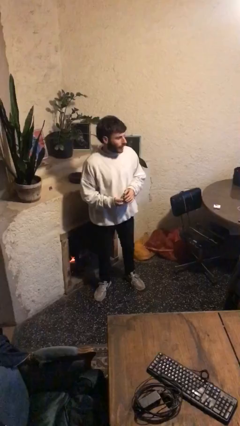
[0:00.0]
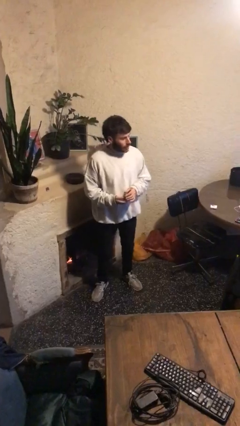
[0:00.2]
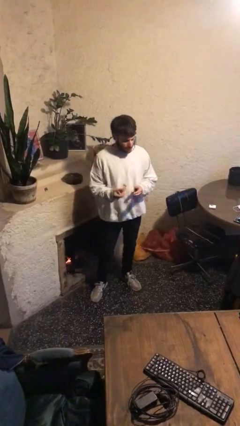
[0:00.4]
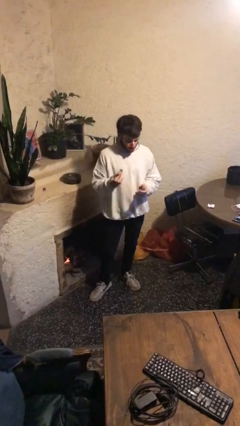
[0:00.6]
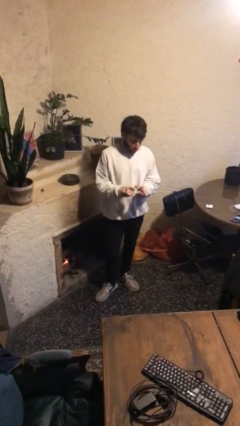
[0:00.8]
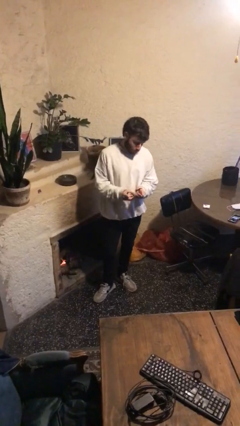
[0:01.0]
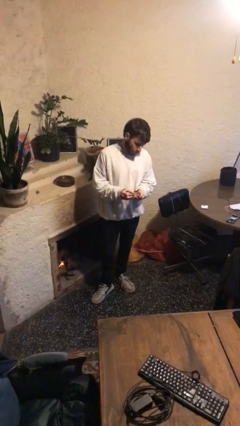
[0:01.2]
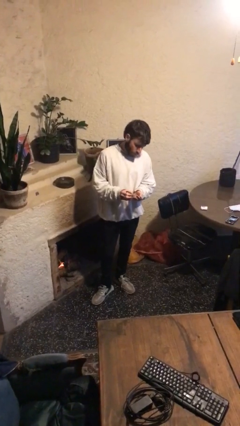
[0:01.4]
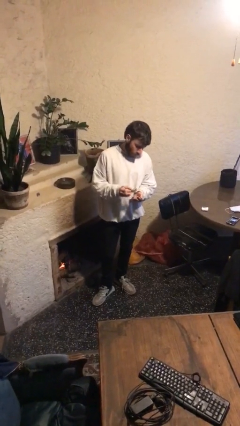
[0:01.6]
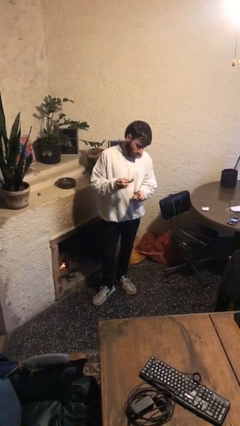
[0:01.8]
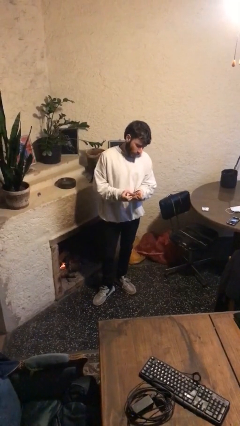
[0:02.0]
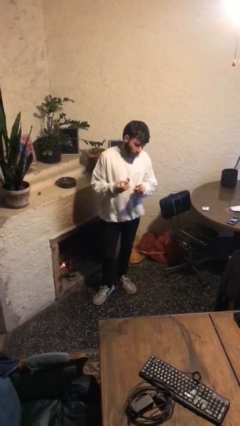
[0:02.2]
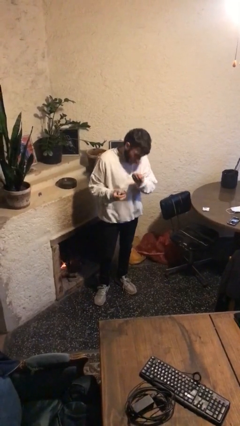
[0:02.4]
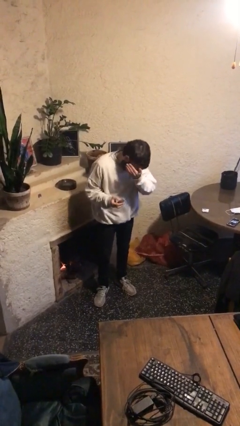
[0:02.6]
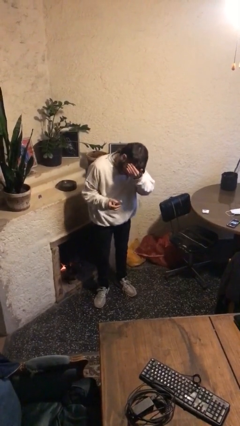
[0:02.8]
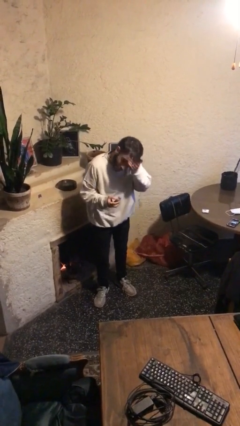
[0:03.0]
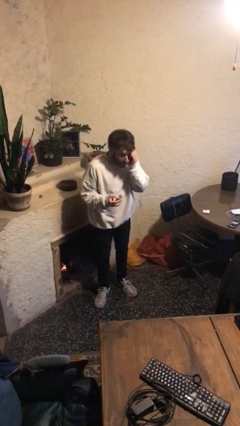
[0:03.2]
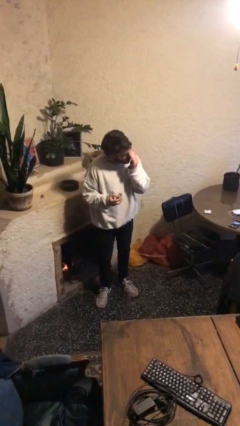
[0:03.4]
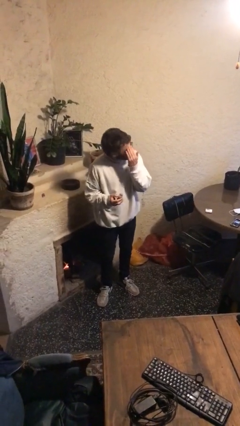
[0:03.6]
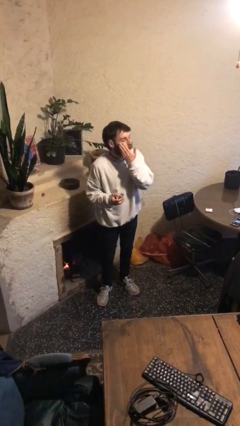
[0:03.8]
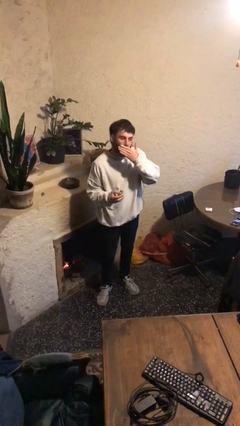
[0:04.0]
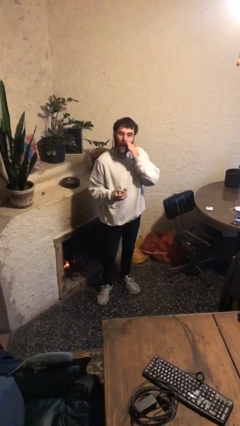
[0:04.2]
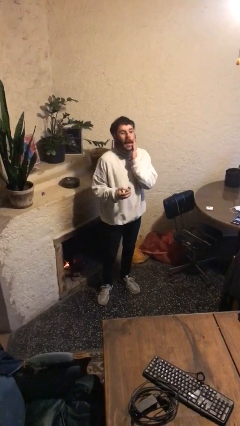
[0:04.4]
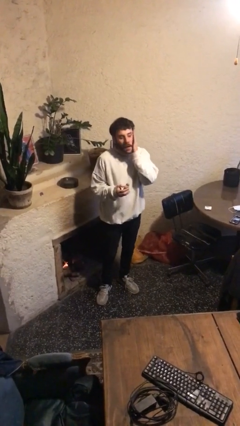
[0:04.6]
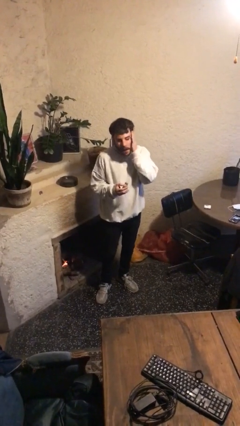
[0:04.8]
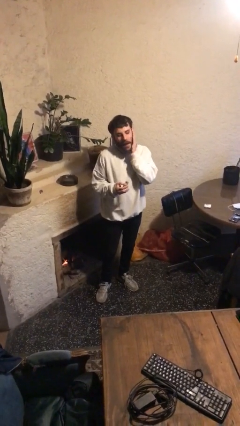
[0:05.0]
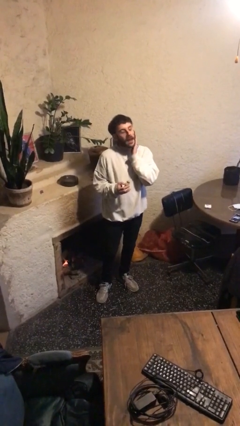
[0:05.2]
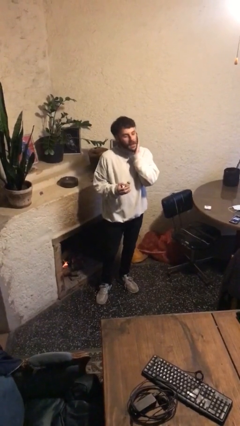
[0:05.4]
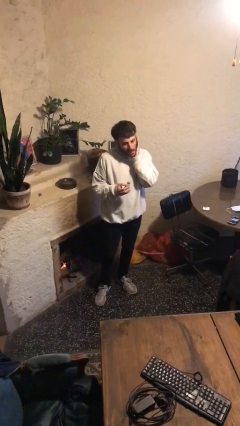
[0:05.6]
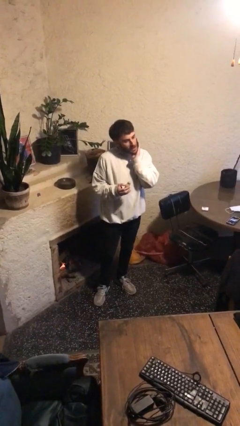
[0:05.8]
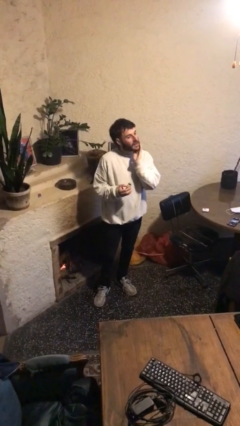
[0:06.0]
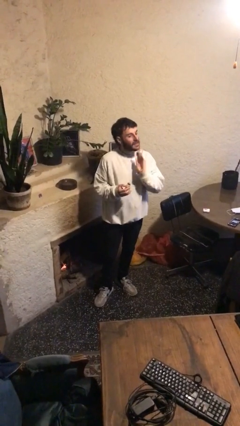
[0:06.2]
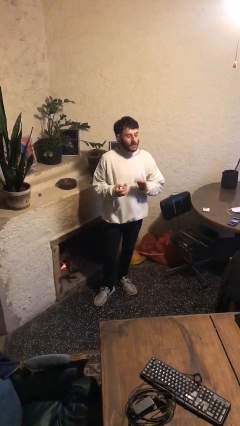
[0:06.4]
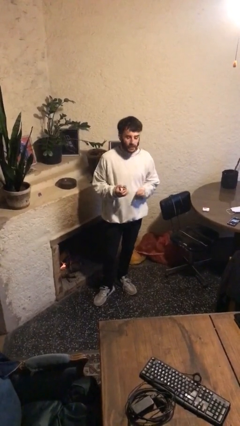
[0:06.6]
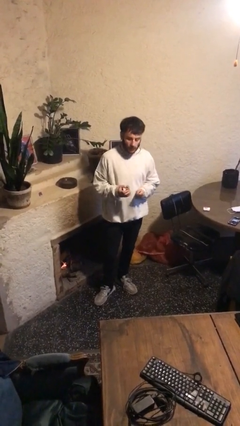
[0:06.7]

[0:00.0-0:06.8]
person applies facial moisturizer

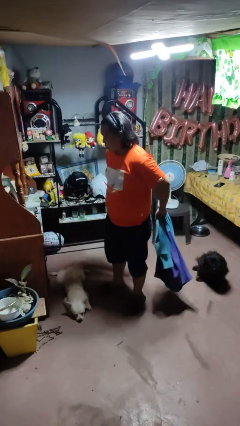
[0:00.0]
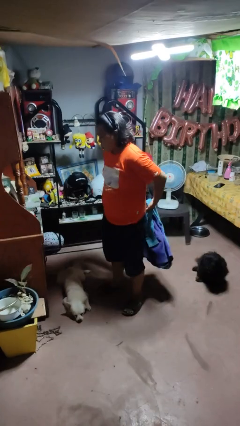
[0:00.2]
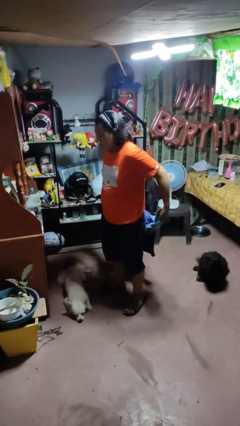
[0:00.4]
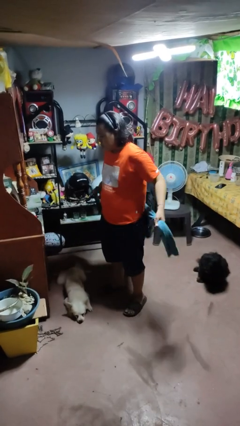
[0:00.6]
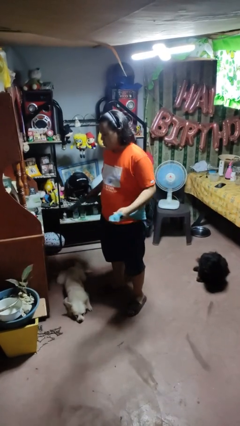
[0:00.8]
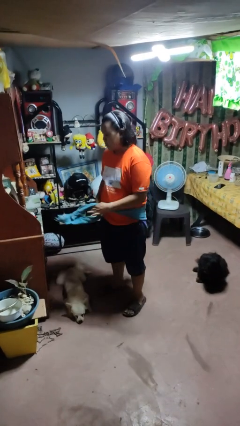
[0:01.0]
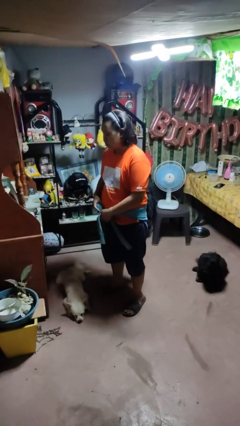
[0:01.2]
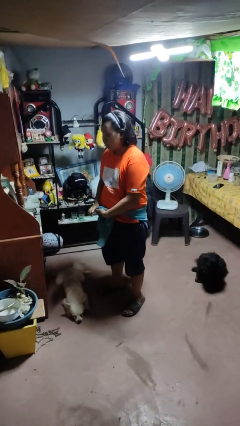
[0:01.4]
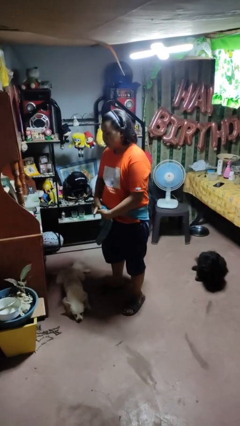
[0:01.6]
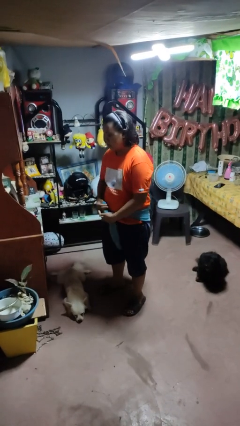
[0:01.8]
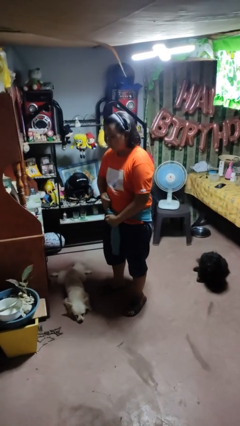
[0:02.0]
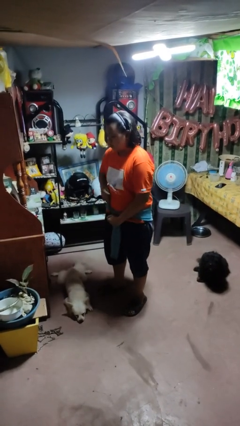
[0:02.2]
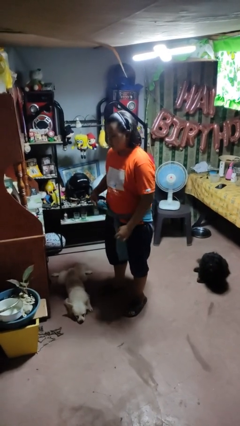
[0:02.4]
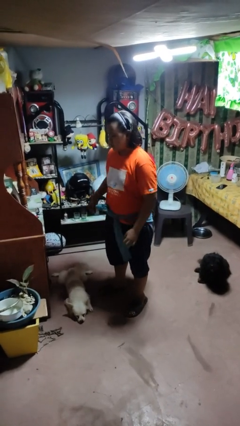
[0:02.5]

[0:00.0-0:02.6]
person ties jacket around waist

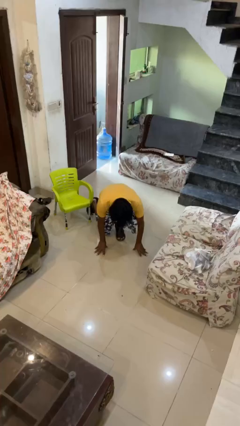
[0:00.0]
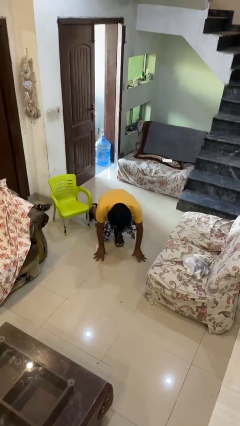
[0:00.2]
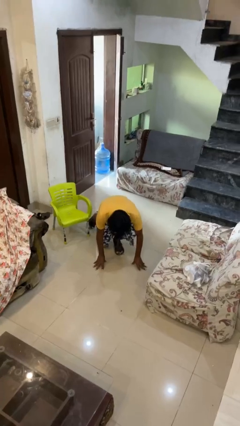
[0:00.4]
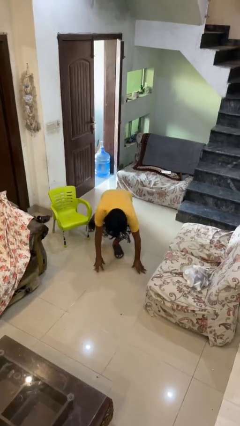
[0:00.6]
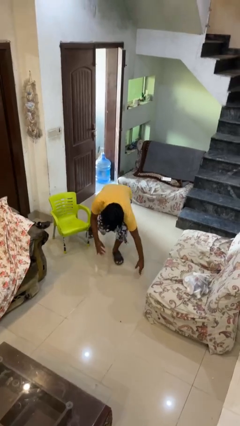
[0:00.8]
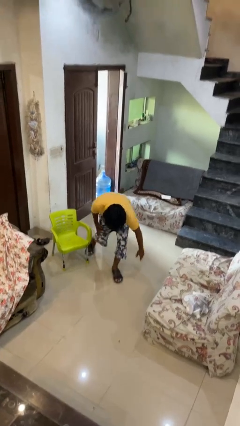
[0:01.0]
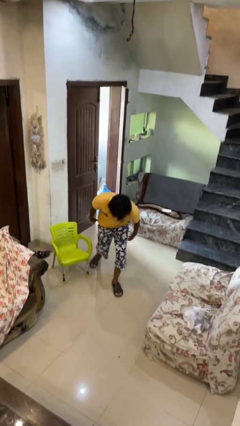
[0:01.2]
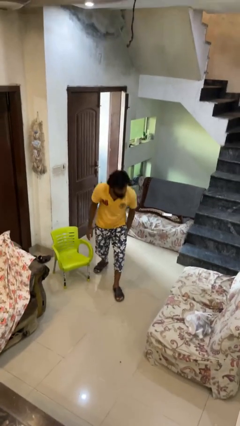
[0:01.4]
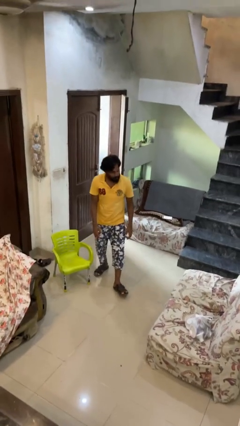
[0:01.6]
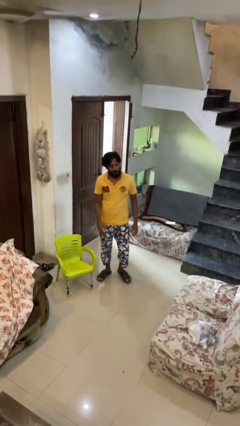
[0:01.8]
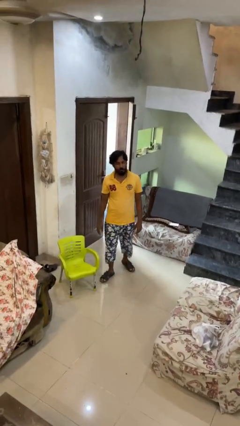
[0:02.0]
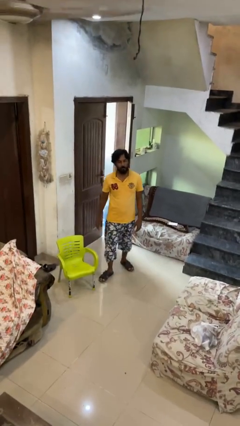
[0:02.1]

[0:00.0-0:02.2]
person stands up from floor

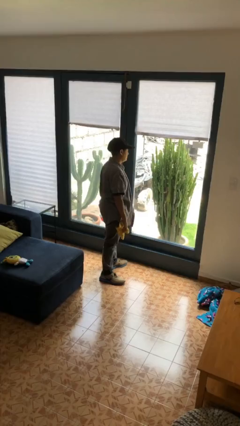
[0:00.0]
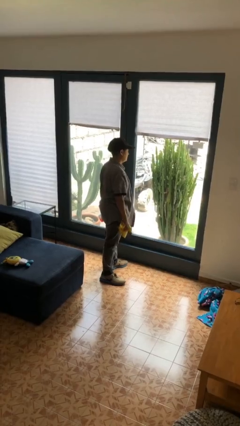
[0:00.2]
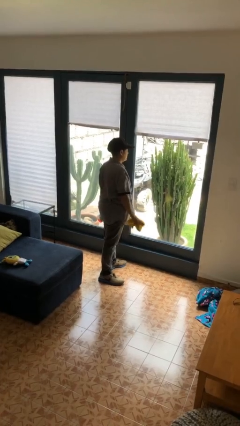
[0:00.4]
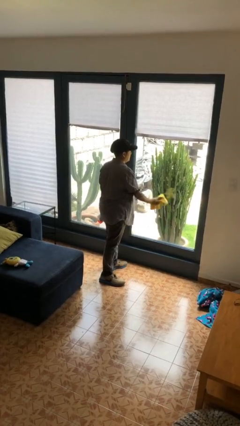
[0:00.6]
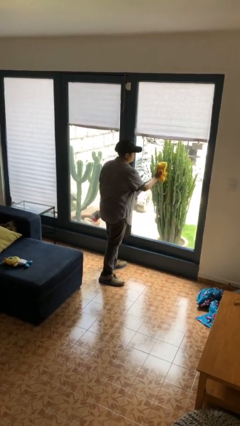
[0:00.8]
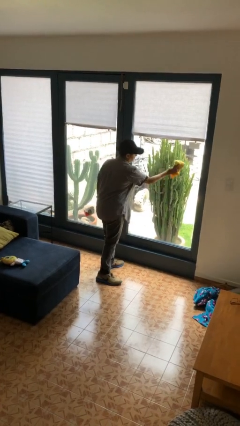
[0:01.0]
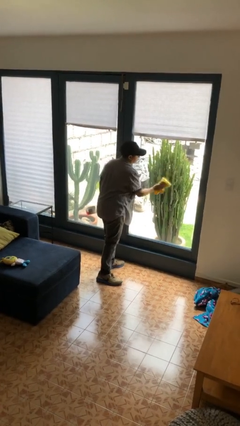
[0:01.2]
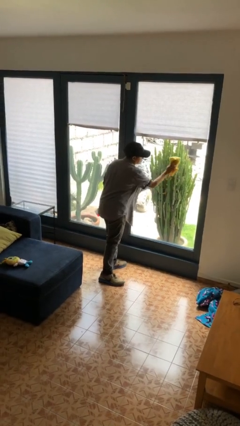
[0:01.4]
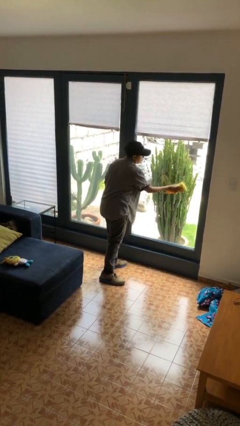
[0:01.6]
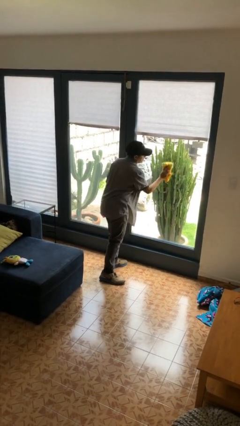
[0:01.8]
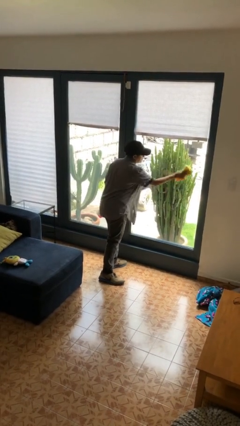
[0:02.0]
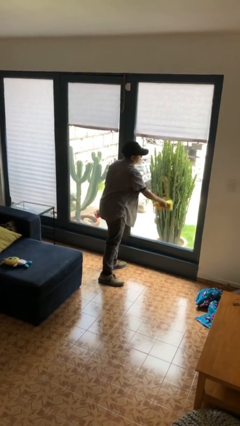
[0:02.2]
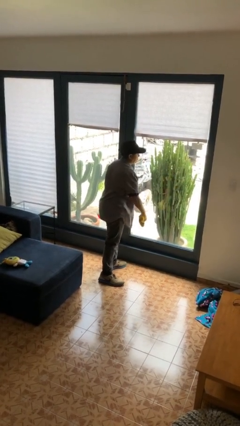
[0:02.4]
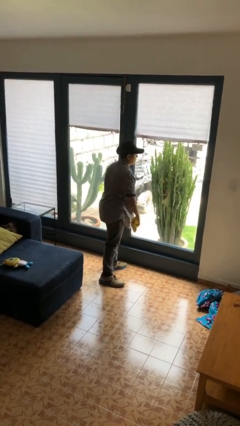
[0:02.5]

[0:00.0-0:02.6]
person washes window

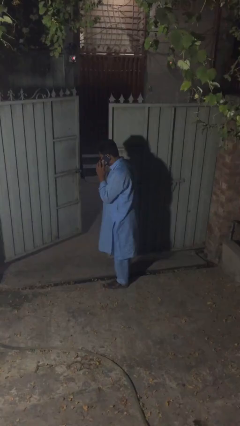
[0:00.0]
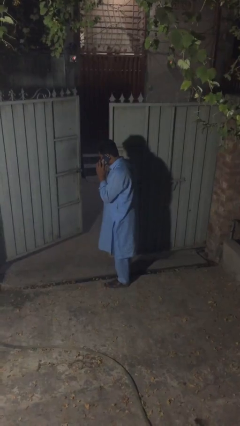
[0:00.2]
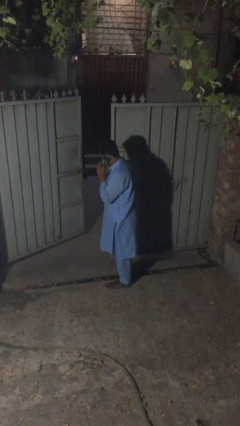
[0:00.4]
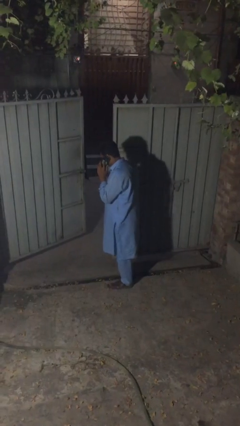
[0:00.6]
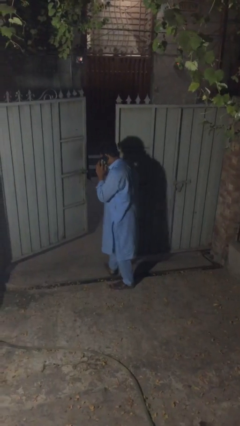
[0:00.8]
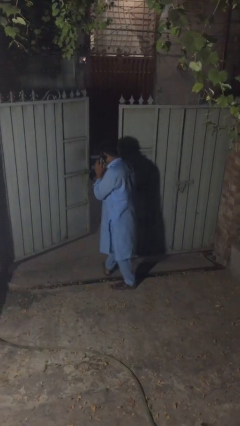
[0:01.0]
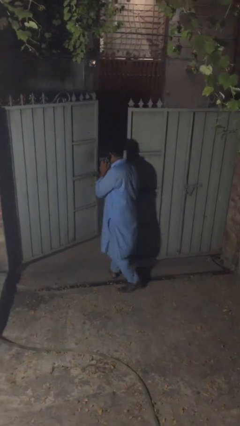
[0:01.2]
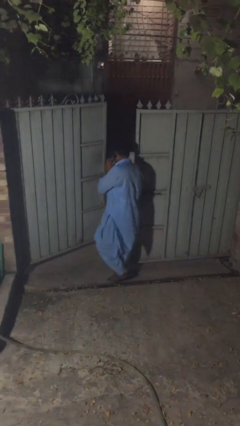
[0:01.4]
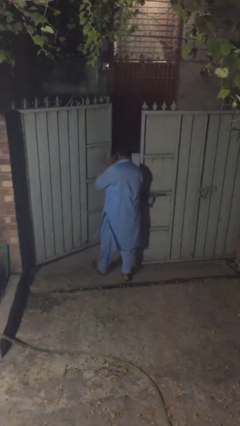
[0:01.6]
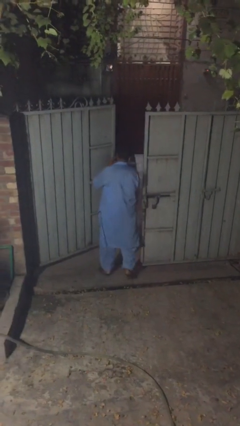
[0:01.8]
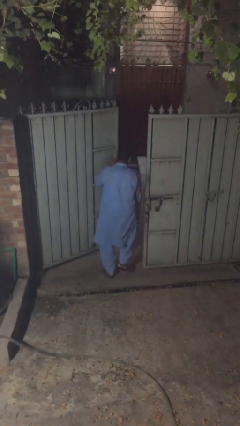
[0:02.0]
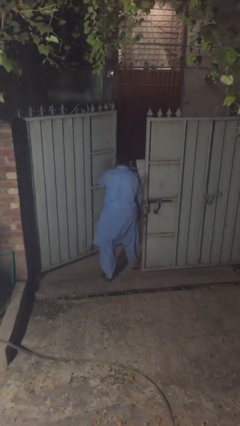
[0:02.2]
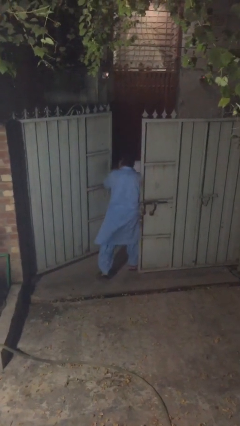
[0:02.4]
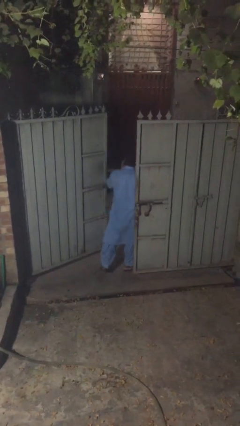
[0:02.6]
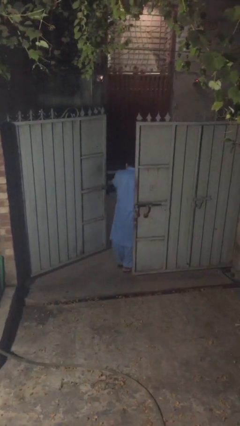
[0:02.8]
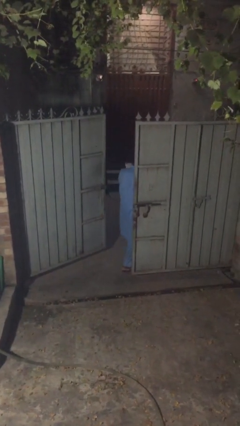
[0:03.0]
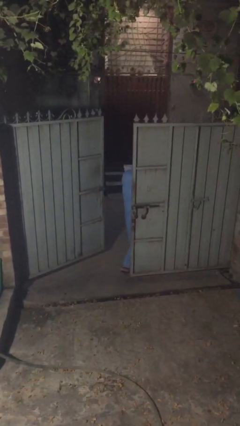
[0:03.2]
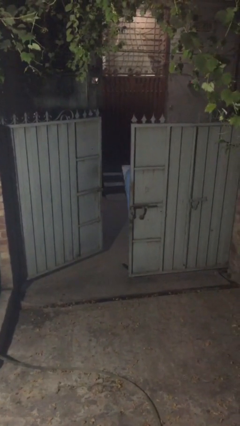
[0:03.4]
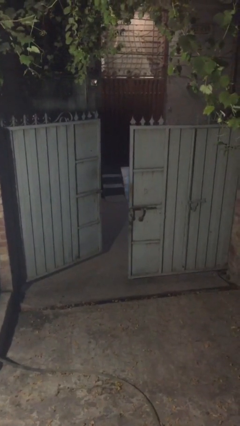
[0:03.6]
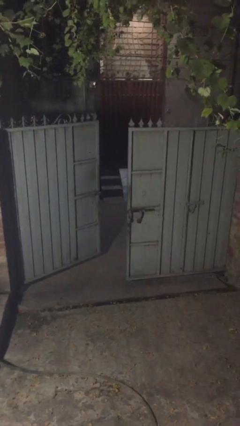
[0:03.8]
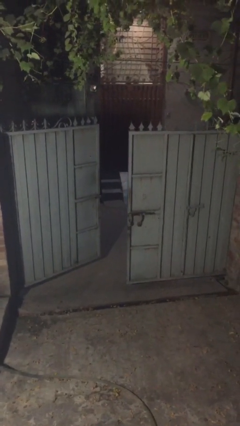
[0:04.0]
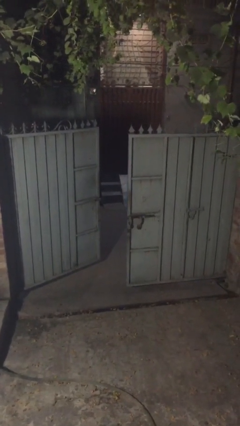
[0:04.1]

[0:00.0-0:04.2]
person exits scene through structure
